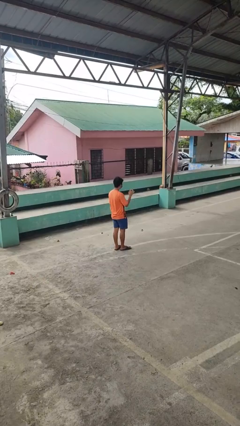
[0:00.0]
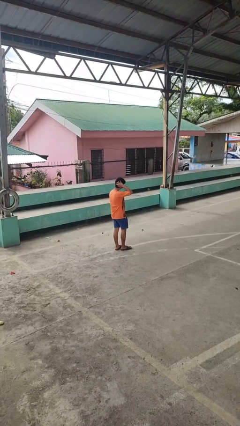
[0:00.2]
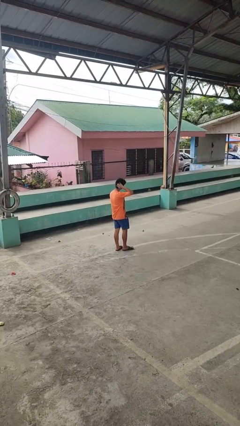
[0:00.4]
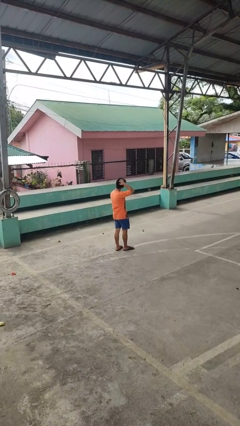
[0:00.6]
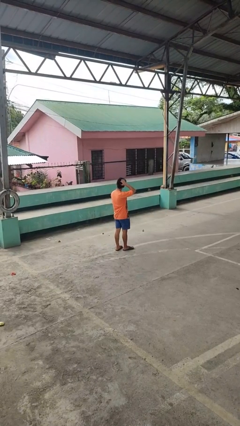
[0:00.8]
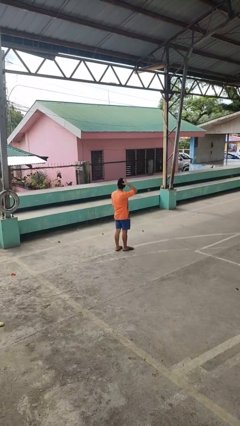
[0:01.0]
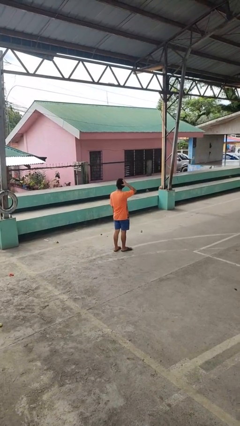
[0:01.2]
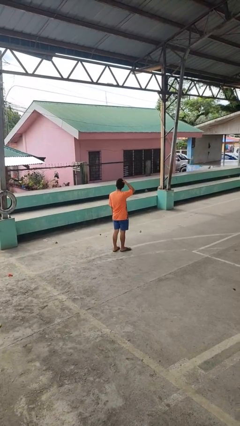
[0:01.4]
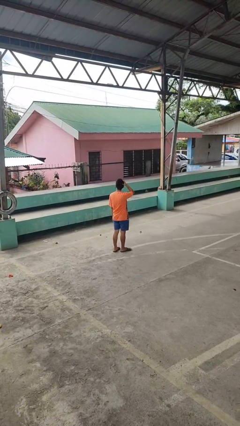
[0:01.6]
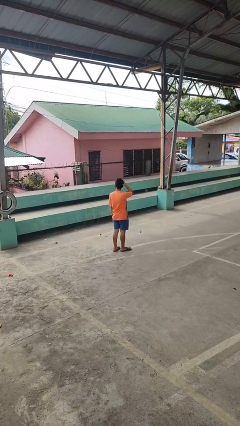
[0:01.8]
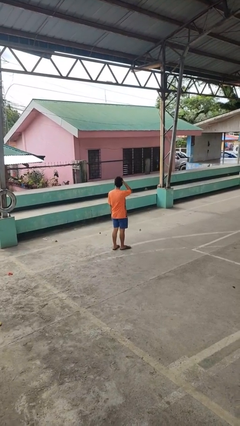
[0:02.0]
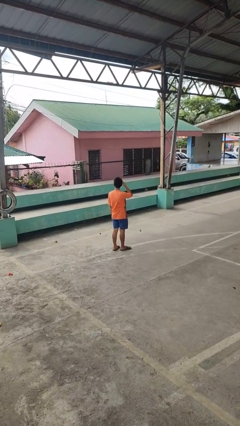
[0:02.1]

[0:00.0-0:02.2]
person scratches face

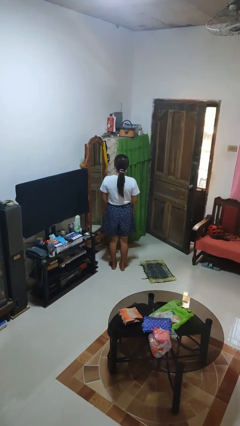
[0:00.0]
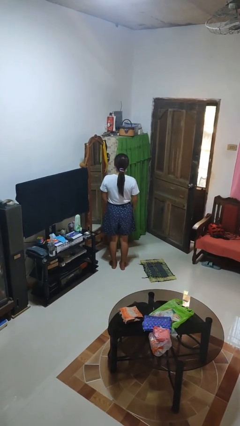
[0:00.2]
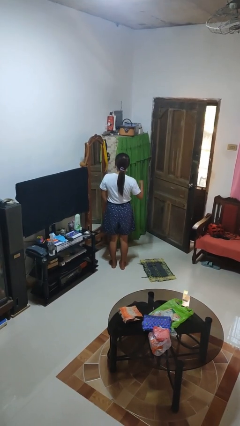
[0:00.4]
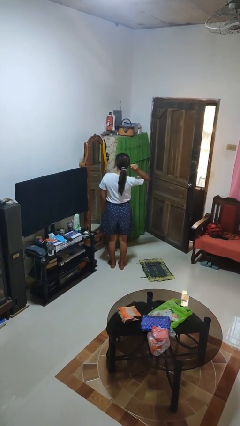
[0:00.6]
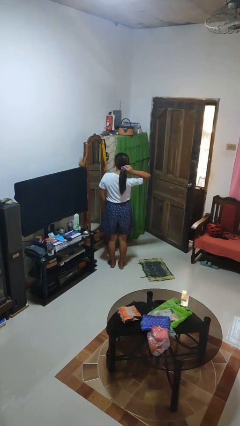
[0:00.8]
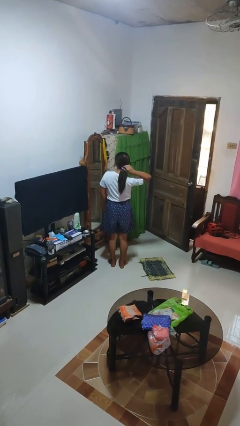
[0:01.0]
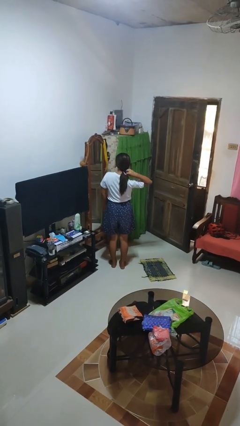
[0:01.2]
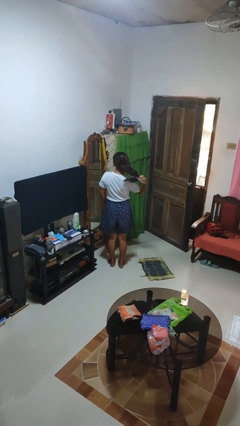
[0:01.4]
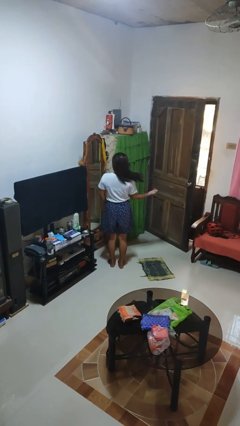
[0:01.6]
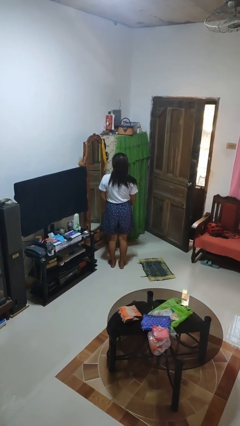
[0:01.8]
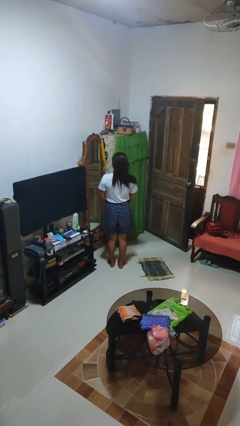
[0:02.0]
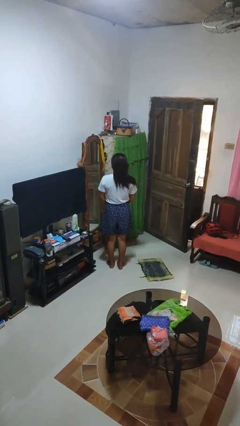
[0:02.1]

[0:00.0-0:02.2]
person takes off hairtie

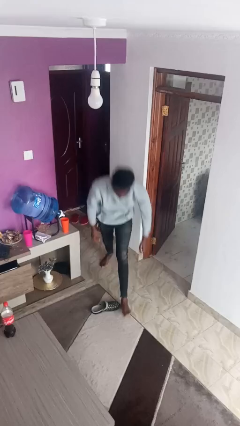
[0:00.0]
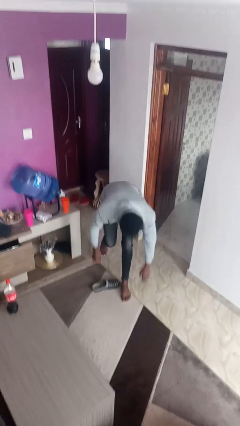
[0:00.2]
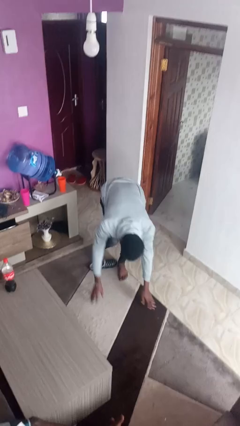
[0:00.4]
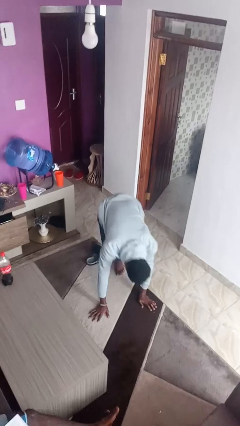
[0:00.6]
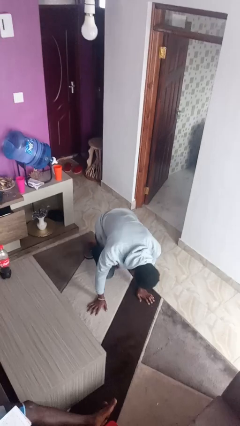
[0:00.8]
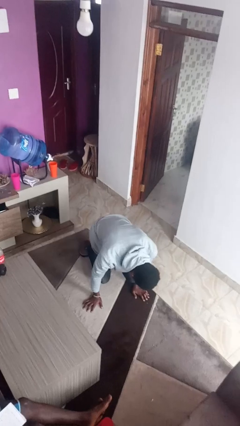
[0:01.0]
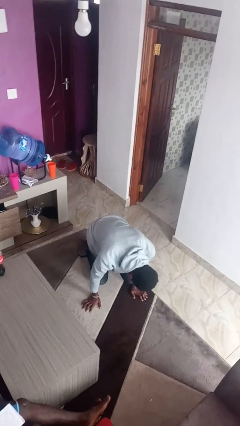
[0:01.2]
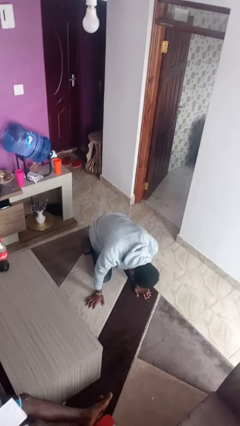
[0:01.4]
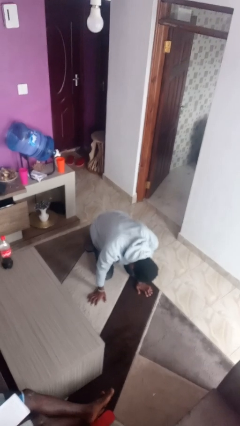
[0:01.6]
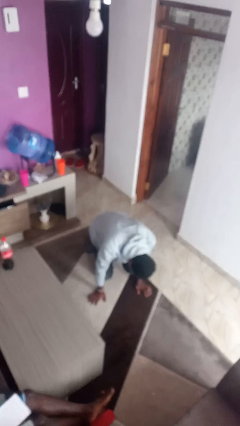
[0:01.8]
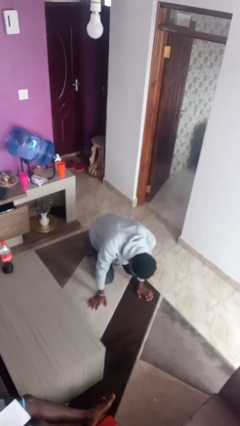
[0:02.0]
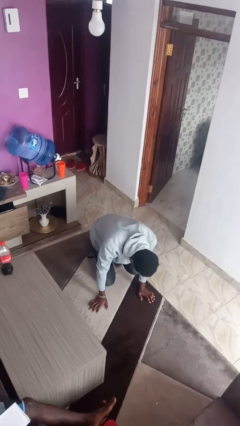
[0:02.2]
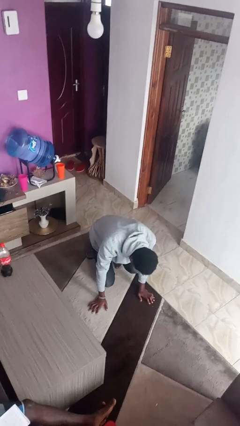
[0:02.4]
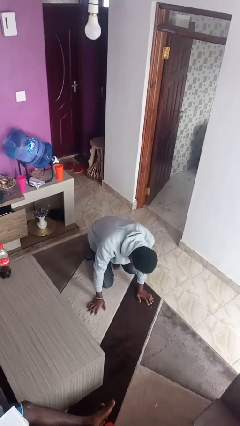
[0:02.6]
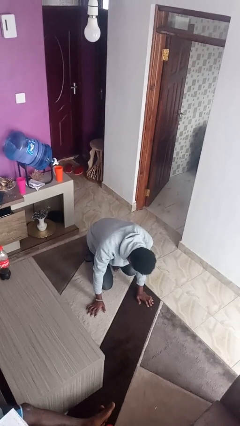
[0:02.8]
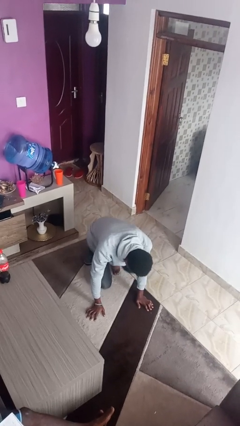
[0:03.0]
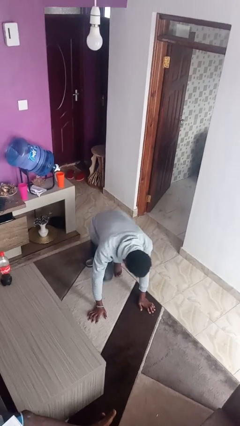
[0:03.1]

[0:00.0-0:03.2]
person trips on object on floor

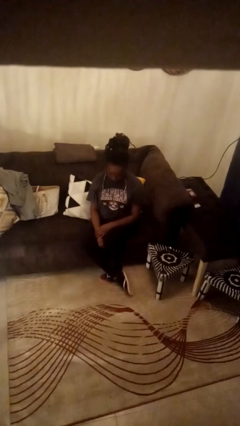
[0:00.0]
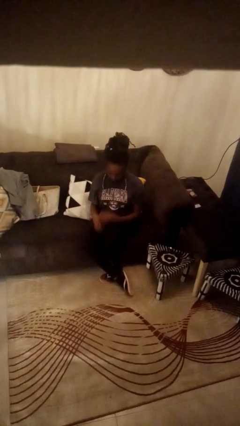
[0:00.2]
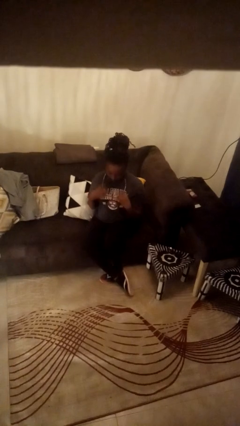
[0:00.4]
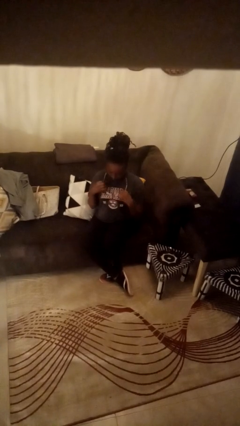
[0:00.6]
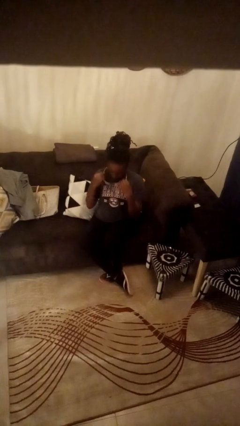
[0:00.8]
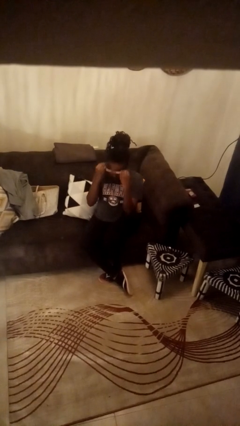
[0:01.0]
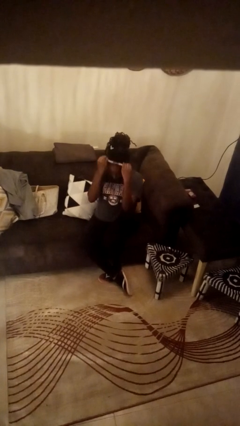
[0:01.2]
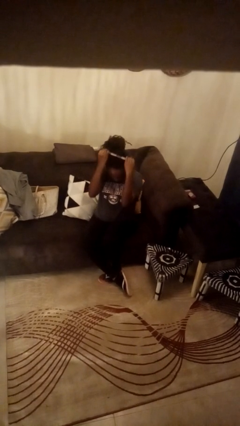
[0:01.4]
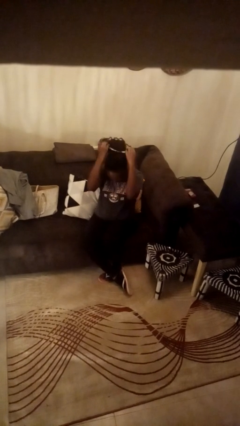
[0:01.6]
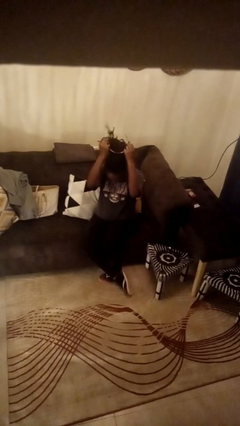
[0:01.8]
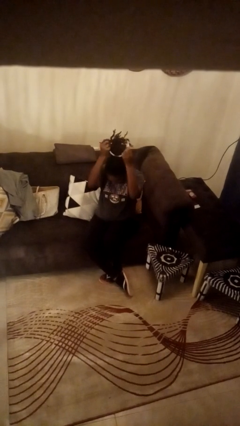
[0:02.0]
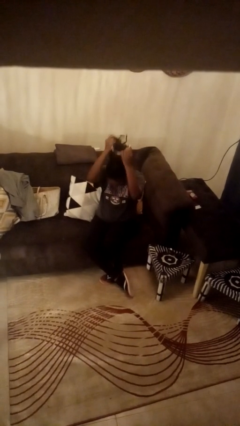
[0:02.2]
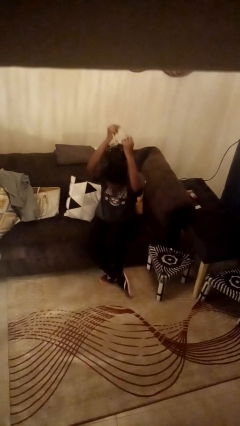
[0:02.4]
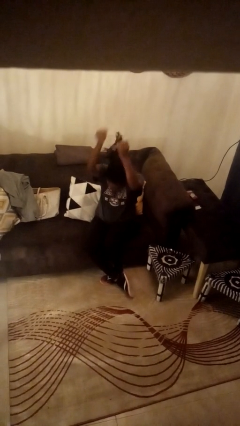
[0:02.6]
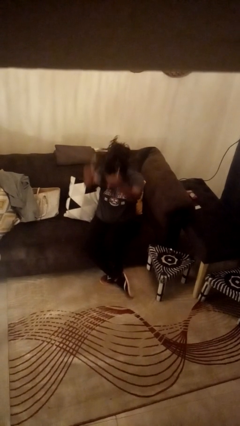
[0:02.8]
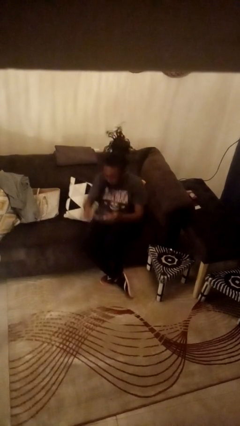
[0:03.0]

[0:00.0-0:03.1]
person takes off necklace

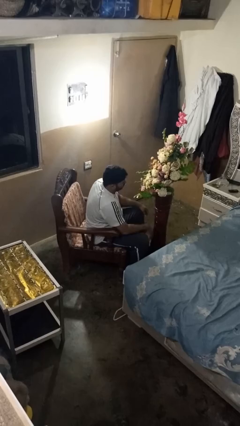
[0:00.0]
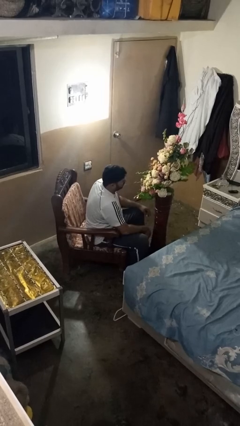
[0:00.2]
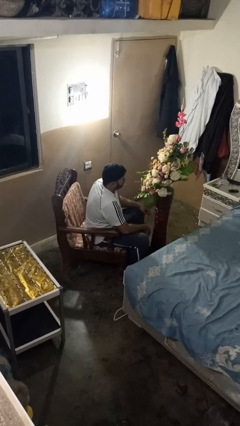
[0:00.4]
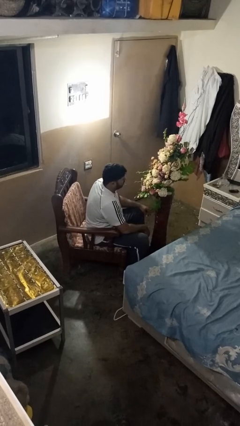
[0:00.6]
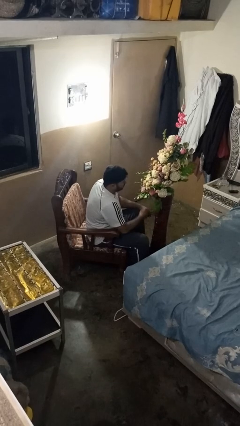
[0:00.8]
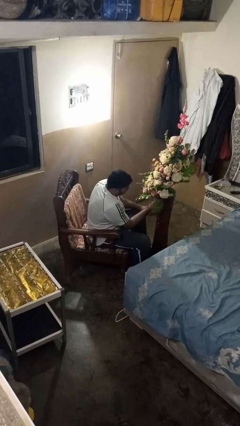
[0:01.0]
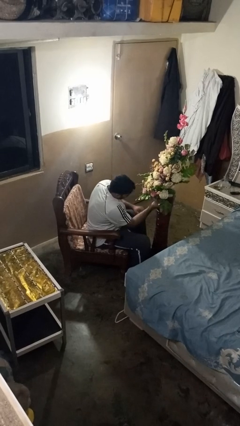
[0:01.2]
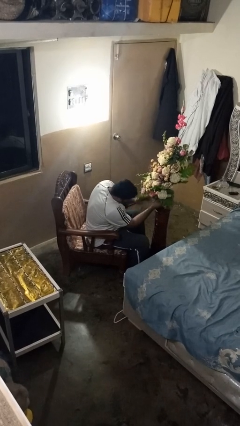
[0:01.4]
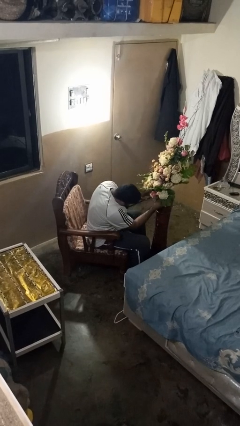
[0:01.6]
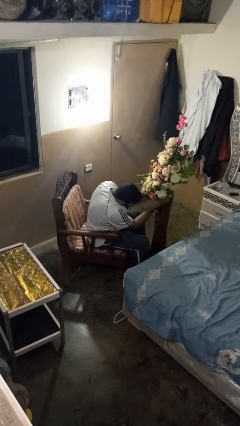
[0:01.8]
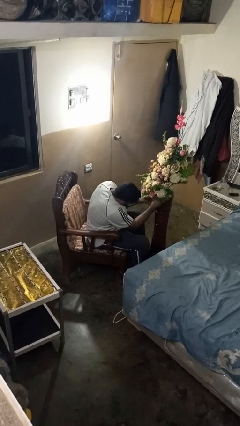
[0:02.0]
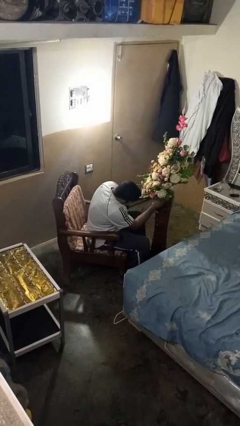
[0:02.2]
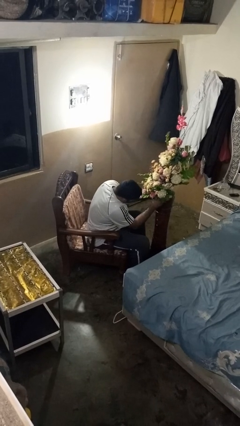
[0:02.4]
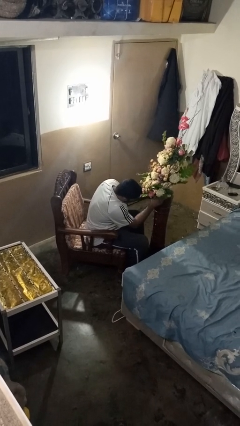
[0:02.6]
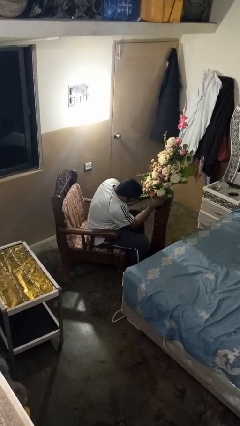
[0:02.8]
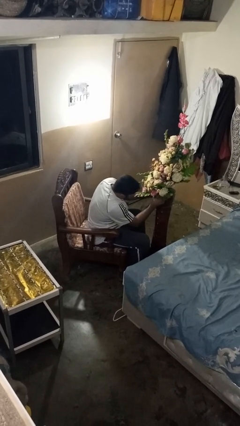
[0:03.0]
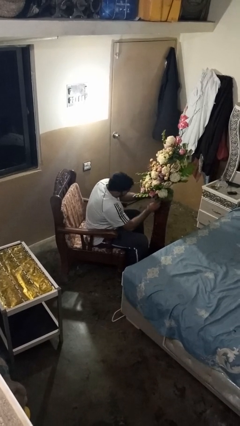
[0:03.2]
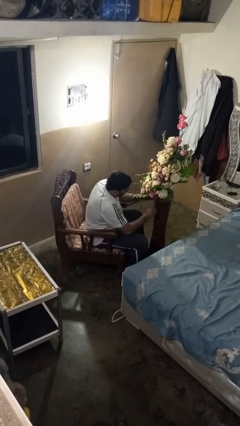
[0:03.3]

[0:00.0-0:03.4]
person arranges flowers in vase

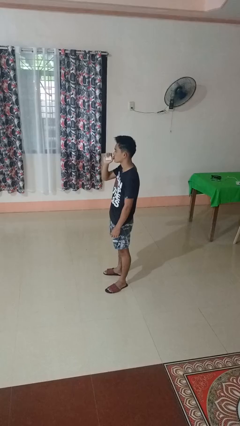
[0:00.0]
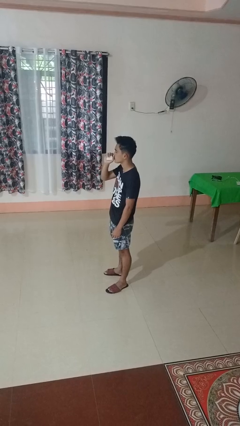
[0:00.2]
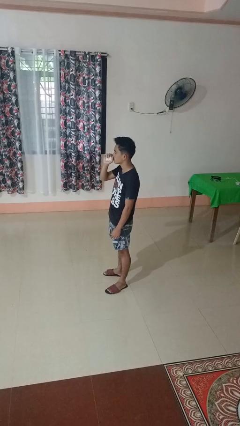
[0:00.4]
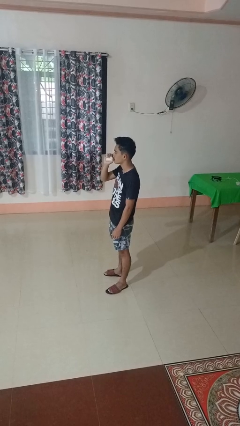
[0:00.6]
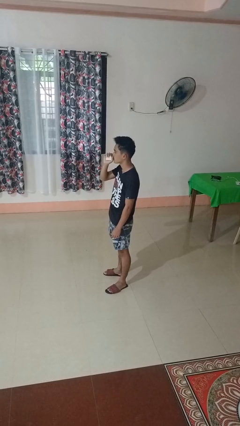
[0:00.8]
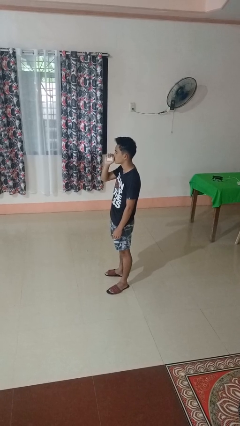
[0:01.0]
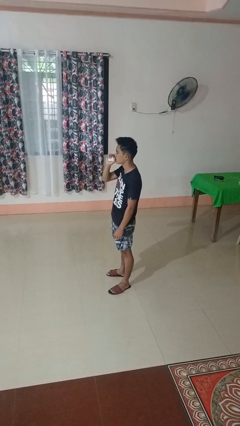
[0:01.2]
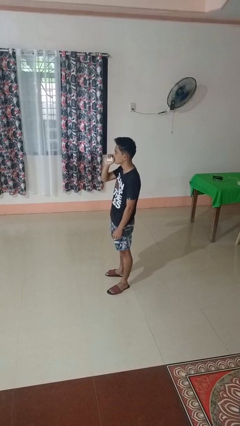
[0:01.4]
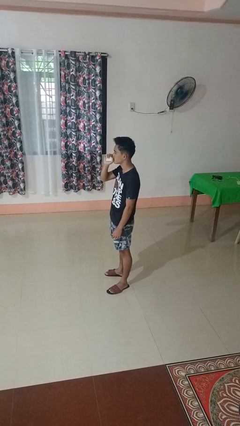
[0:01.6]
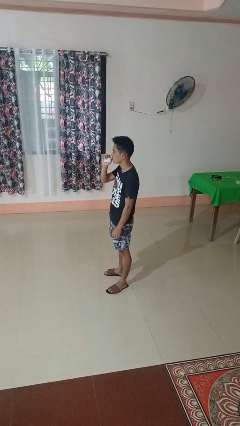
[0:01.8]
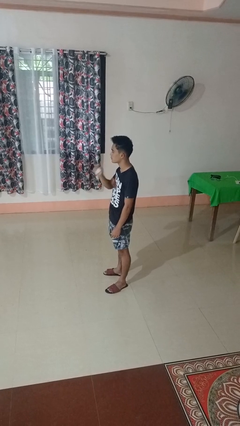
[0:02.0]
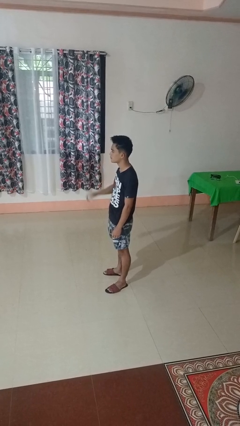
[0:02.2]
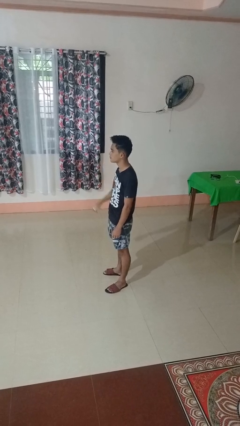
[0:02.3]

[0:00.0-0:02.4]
person vapes

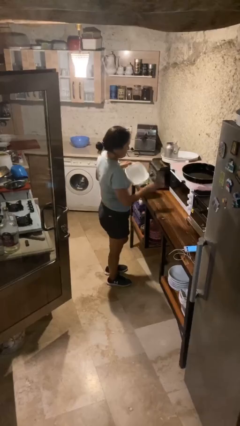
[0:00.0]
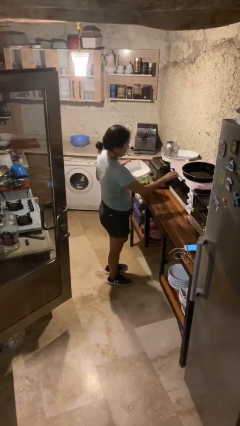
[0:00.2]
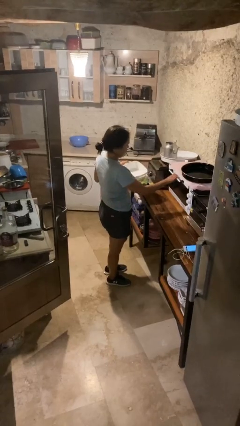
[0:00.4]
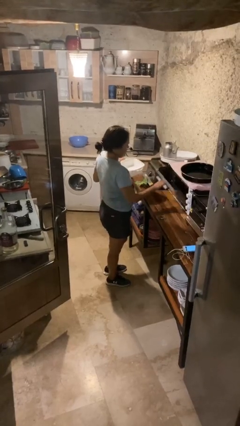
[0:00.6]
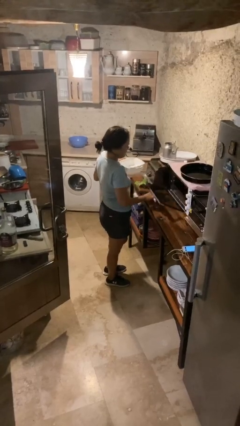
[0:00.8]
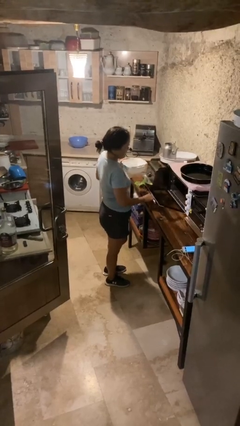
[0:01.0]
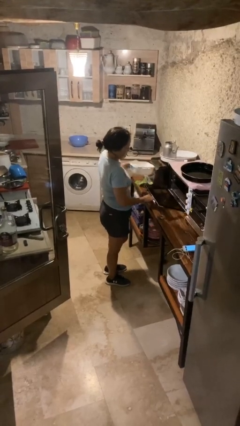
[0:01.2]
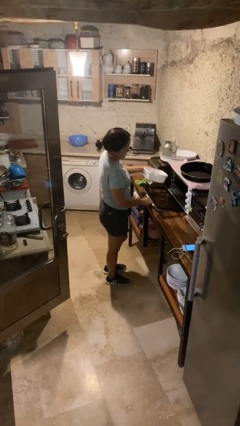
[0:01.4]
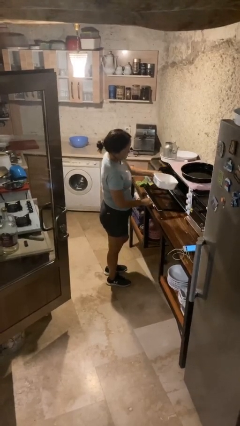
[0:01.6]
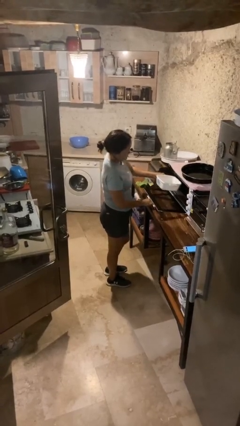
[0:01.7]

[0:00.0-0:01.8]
person opens microwave
